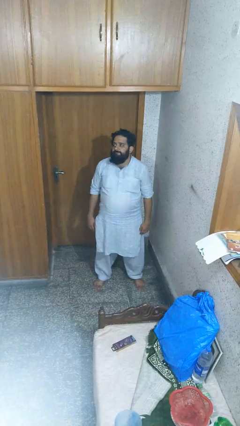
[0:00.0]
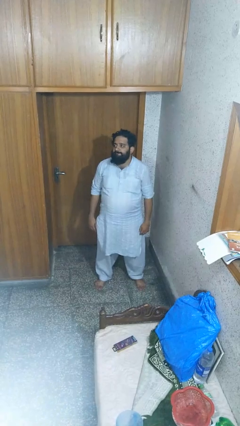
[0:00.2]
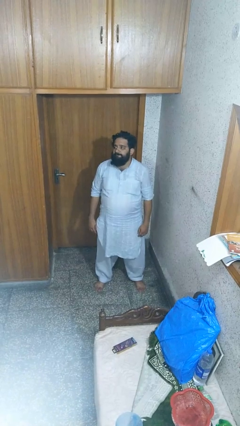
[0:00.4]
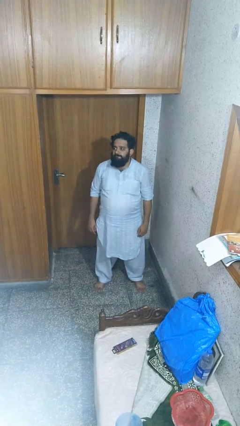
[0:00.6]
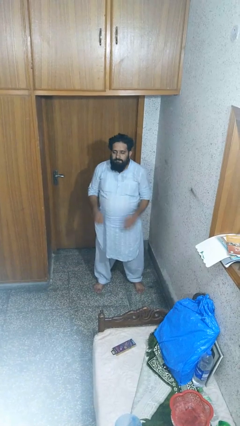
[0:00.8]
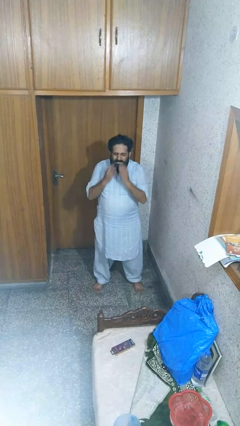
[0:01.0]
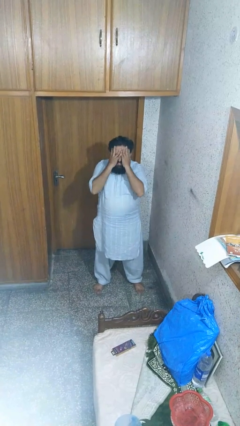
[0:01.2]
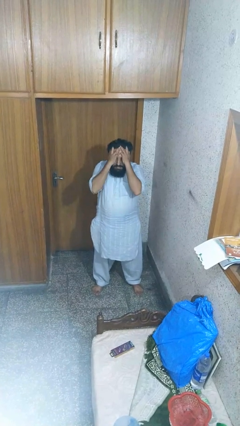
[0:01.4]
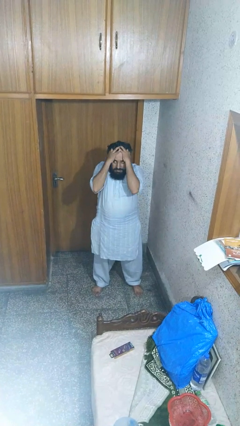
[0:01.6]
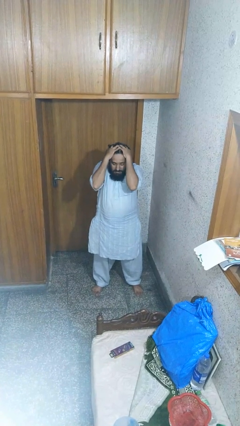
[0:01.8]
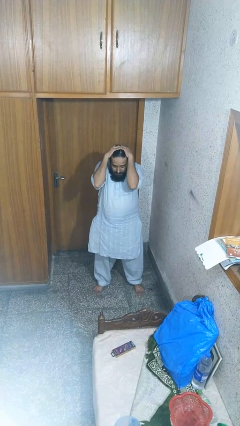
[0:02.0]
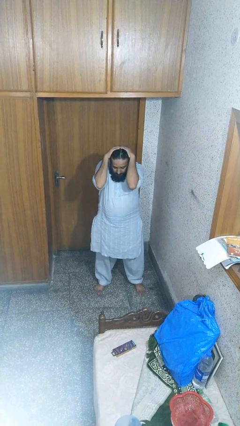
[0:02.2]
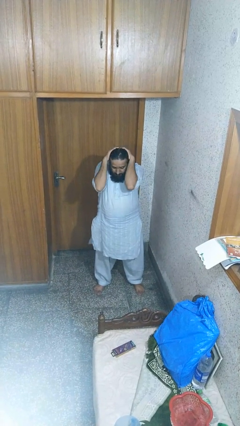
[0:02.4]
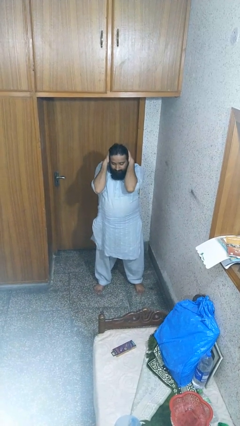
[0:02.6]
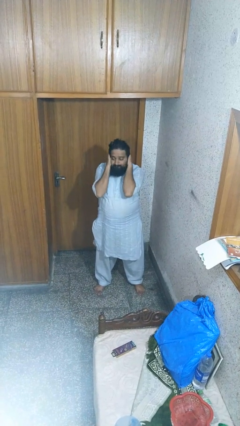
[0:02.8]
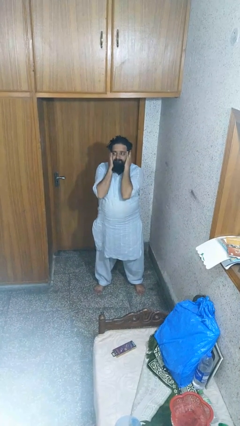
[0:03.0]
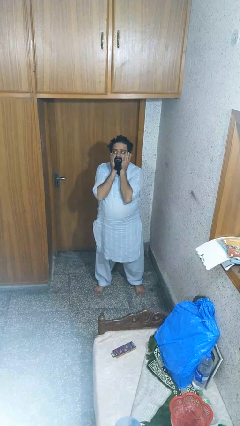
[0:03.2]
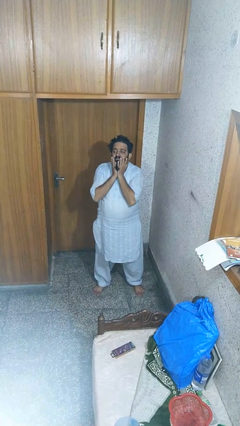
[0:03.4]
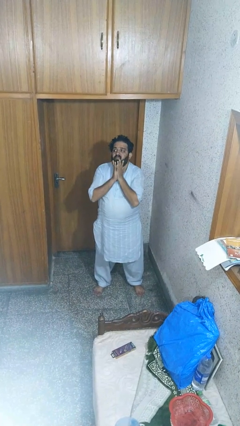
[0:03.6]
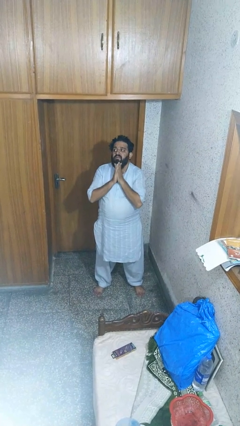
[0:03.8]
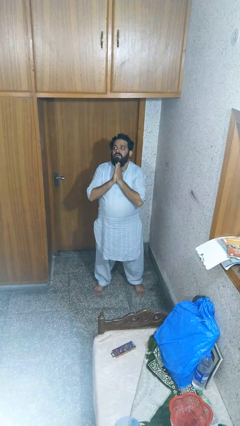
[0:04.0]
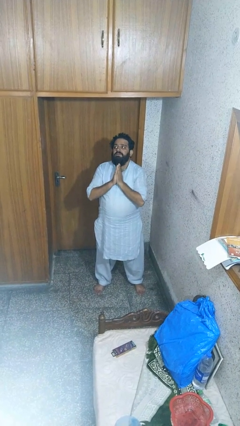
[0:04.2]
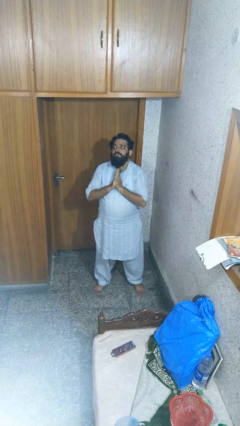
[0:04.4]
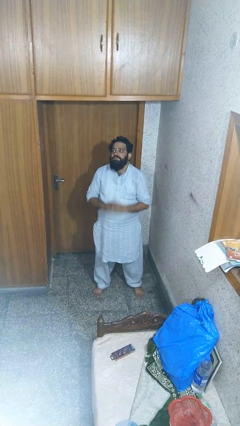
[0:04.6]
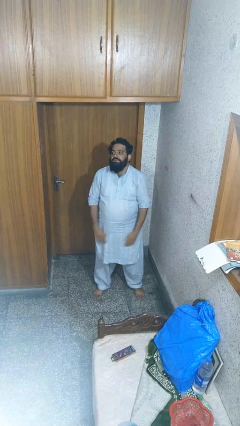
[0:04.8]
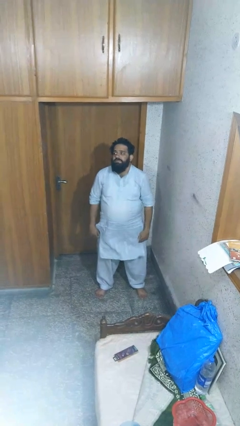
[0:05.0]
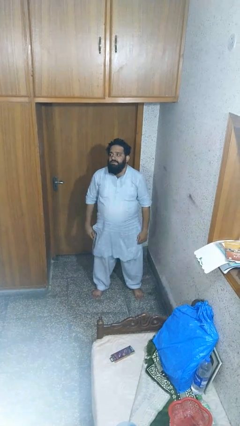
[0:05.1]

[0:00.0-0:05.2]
person scratches face

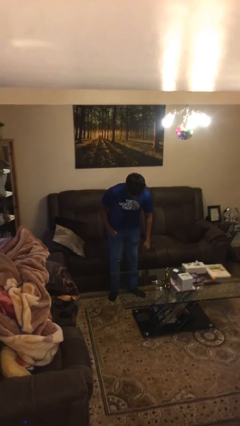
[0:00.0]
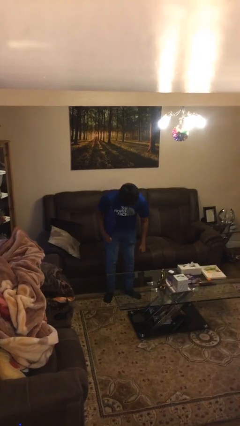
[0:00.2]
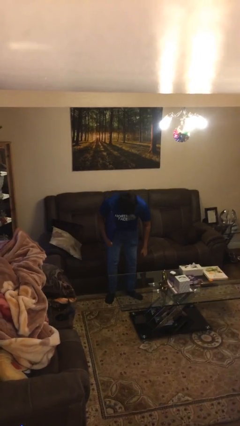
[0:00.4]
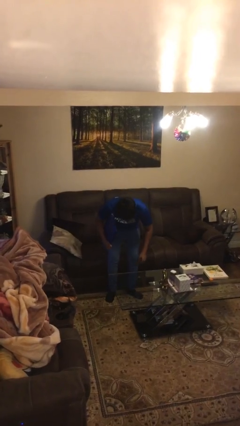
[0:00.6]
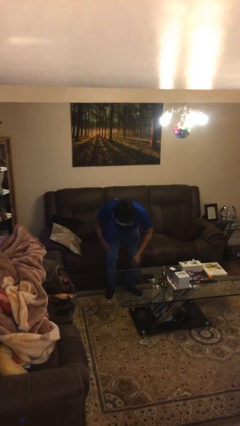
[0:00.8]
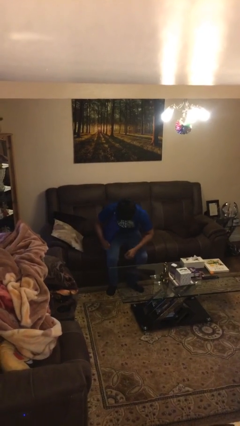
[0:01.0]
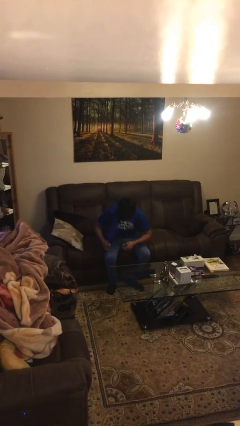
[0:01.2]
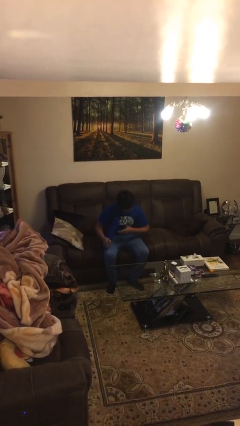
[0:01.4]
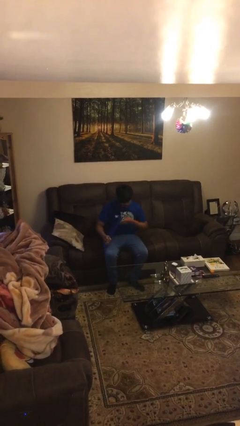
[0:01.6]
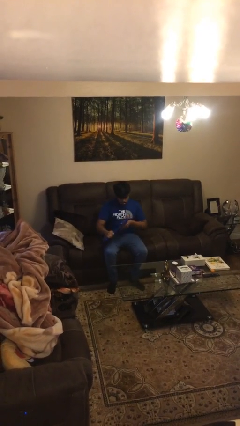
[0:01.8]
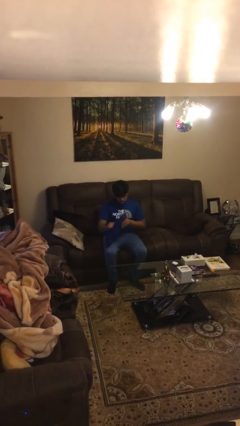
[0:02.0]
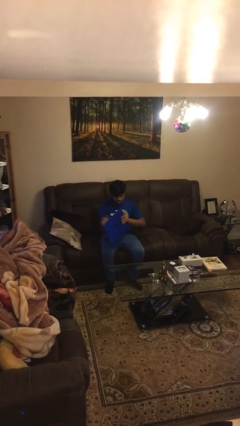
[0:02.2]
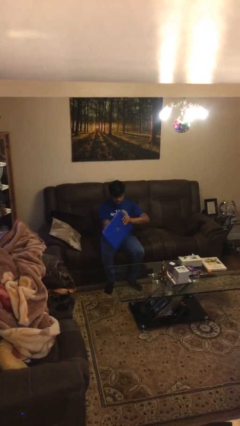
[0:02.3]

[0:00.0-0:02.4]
person sits down

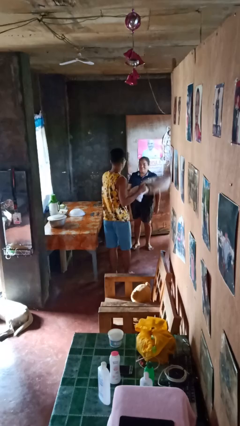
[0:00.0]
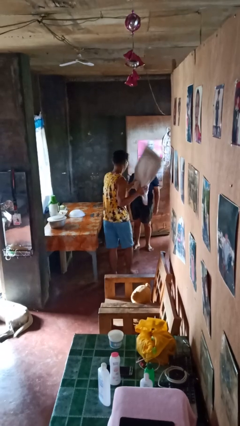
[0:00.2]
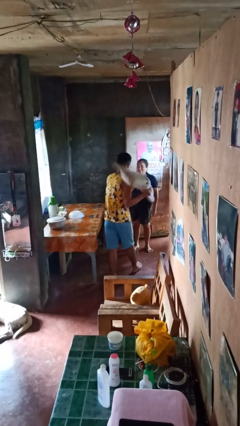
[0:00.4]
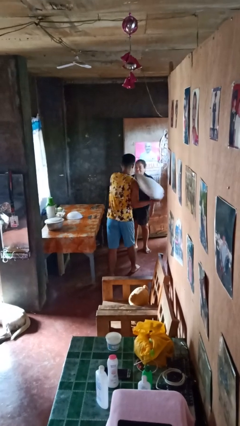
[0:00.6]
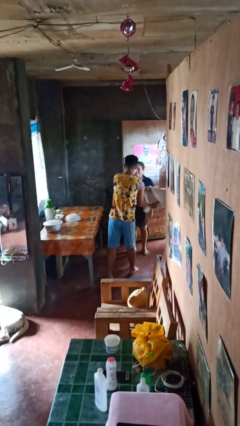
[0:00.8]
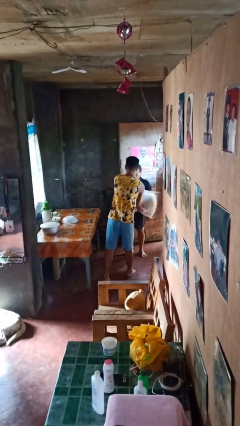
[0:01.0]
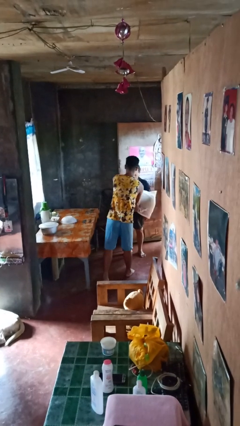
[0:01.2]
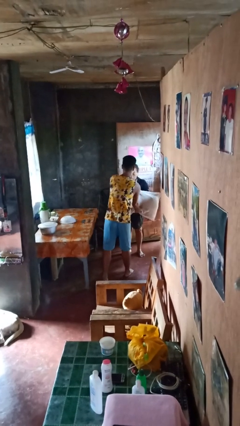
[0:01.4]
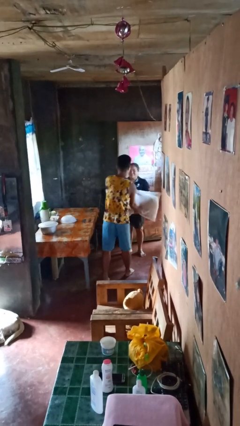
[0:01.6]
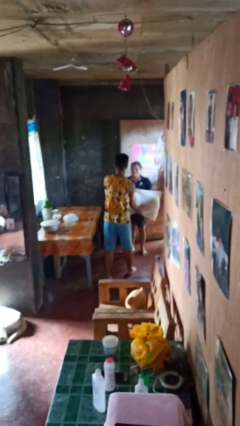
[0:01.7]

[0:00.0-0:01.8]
person hits person with pillow

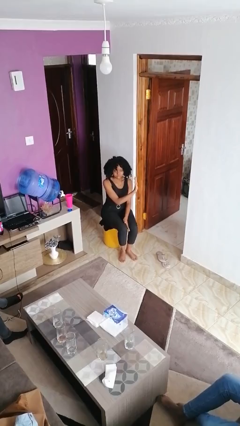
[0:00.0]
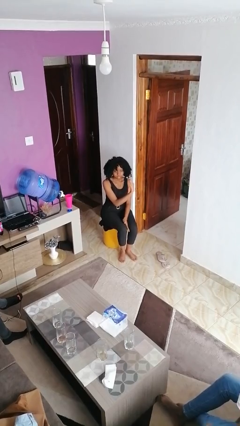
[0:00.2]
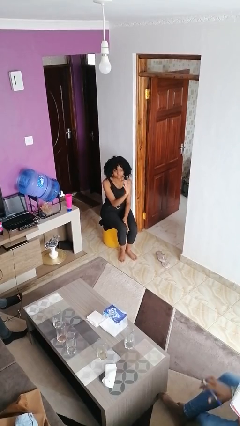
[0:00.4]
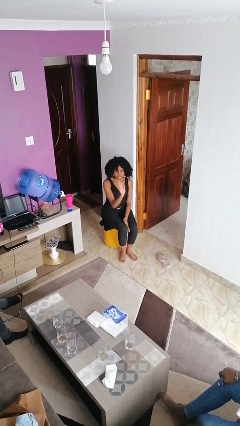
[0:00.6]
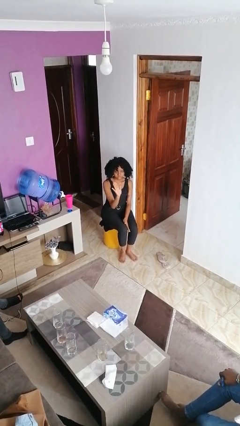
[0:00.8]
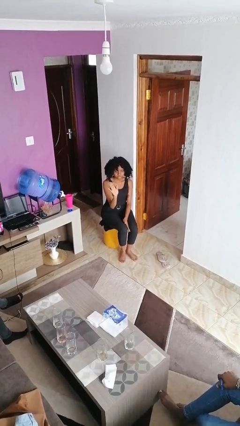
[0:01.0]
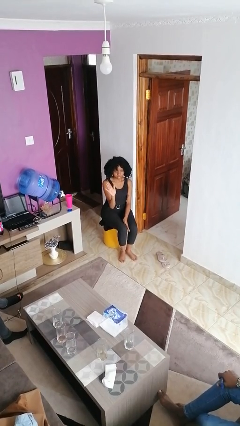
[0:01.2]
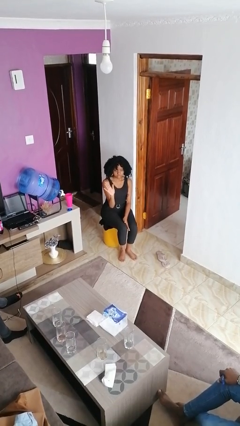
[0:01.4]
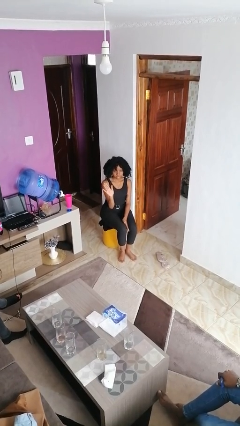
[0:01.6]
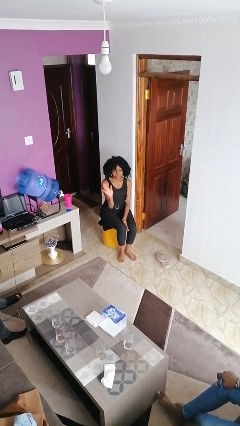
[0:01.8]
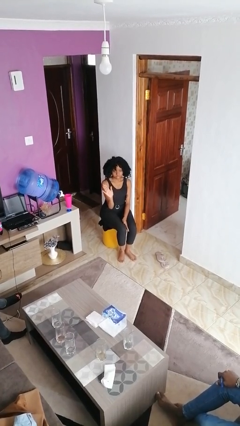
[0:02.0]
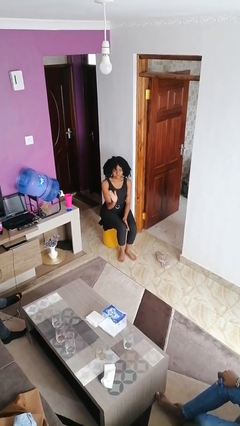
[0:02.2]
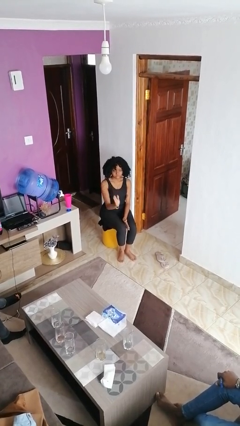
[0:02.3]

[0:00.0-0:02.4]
person gestures swipe right

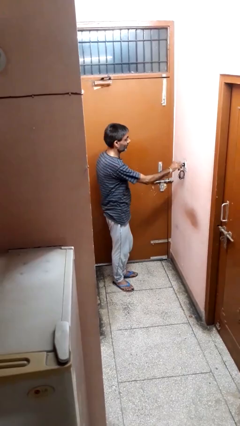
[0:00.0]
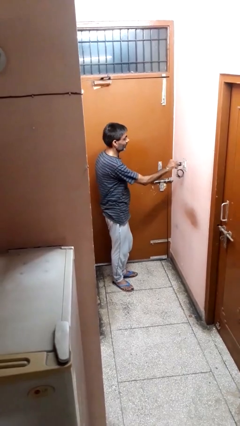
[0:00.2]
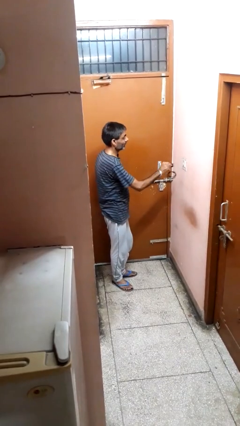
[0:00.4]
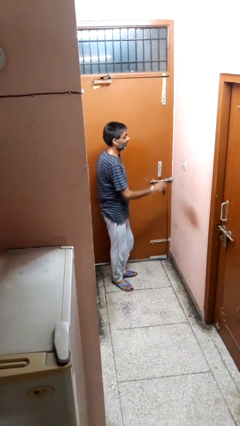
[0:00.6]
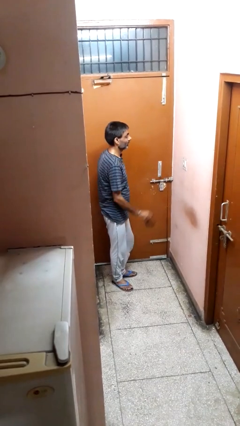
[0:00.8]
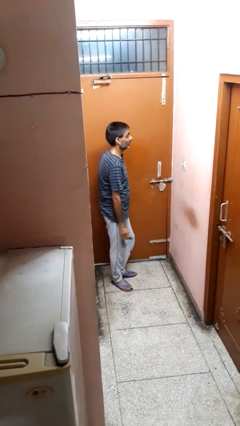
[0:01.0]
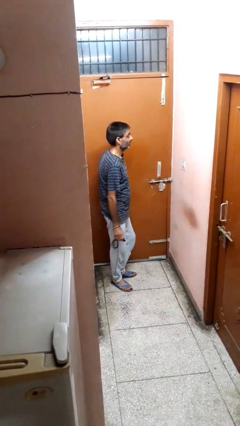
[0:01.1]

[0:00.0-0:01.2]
person unplugs from electrical socket

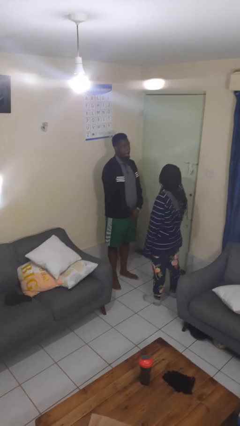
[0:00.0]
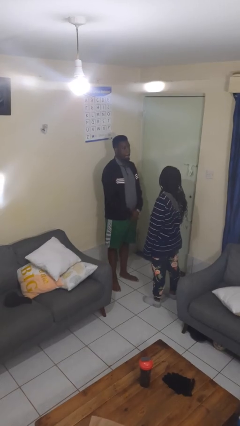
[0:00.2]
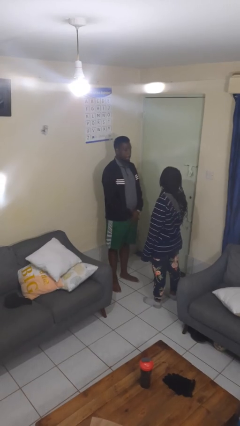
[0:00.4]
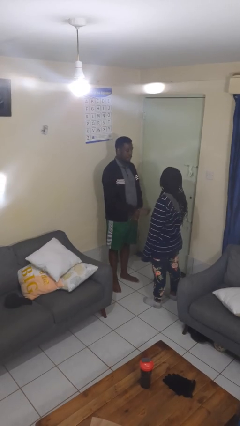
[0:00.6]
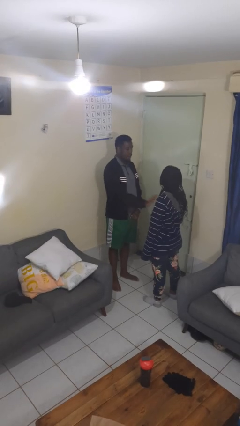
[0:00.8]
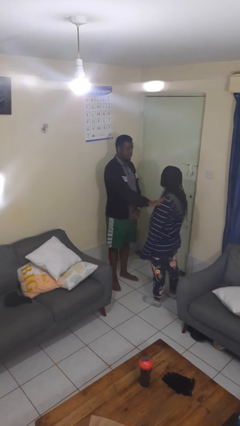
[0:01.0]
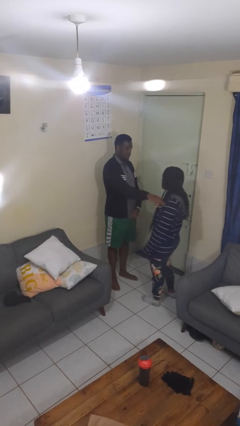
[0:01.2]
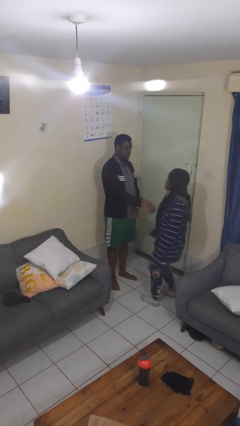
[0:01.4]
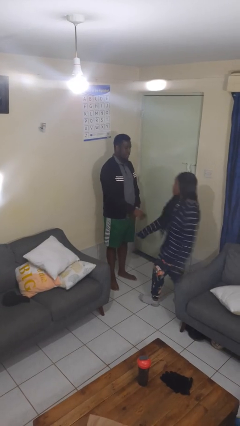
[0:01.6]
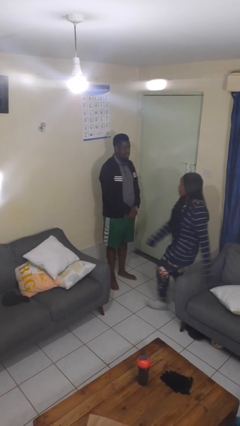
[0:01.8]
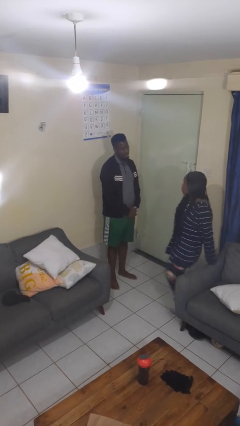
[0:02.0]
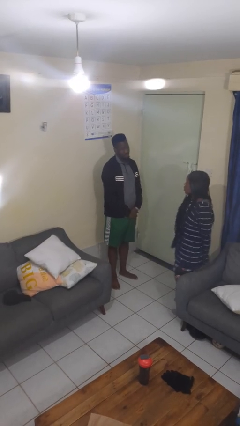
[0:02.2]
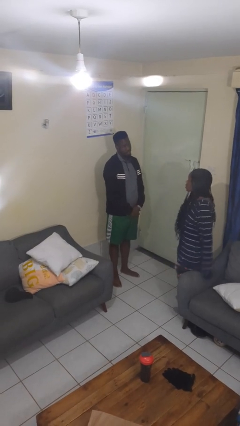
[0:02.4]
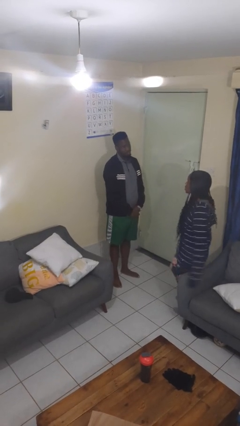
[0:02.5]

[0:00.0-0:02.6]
person shoves person

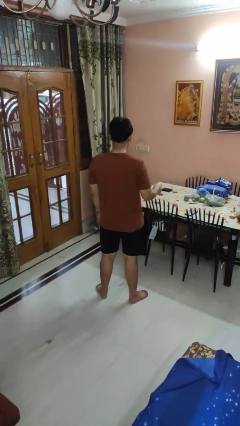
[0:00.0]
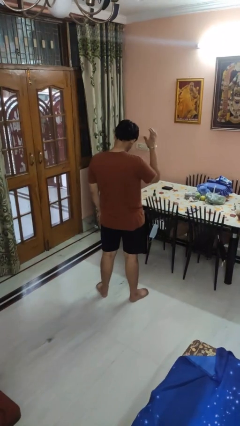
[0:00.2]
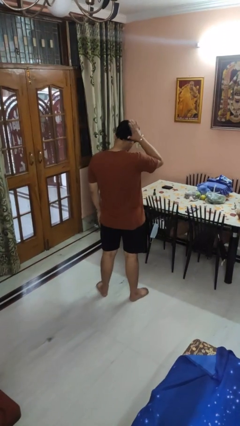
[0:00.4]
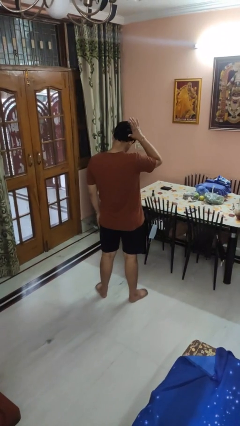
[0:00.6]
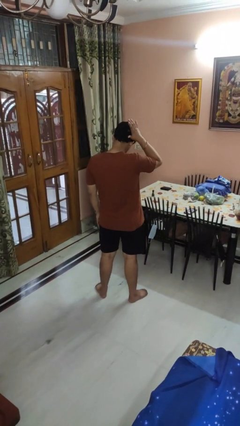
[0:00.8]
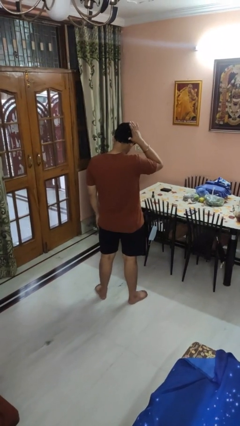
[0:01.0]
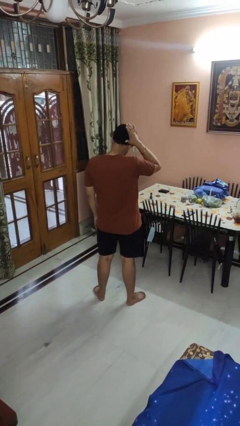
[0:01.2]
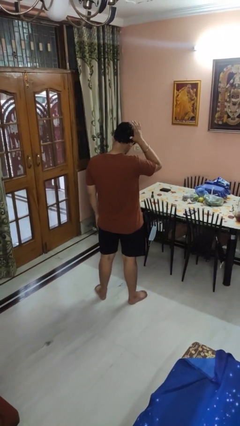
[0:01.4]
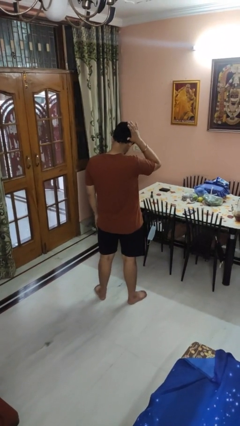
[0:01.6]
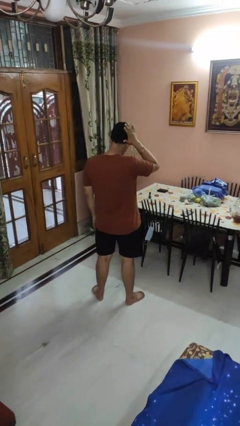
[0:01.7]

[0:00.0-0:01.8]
person pats head
